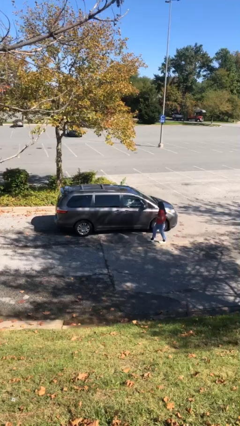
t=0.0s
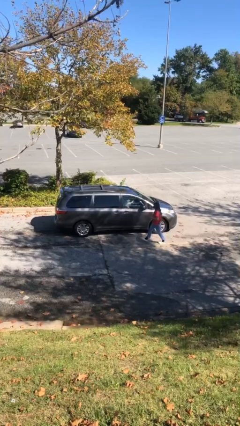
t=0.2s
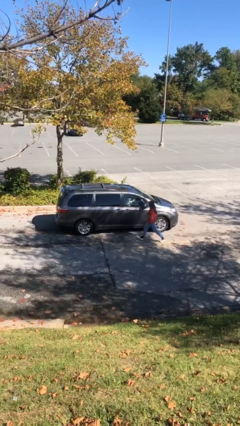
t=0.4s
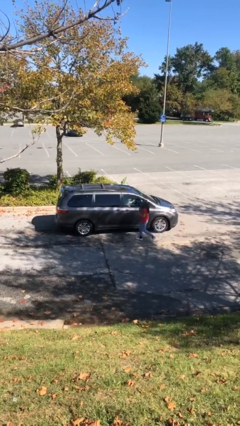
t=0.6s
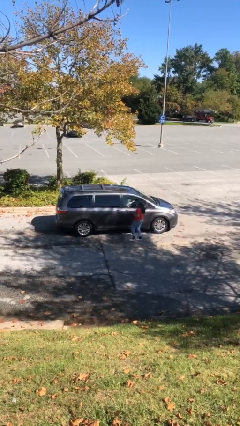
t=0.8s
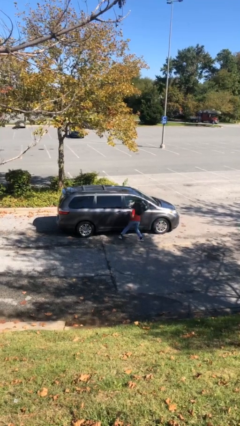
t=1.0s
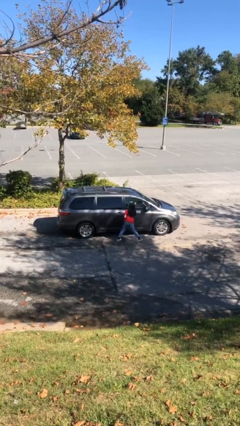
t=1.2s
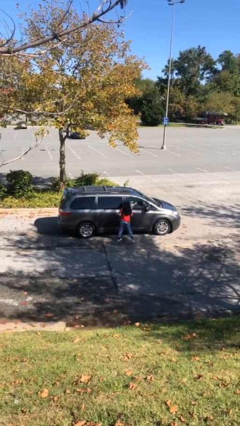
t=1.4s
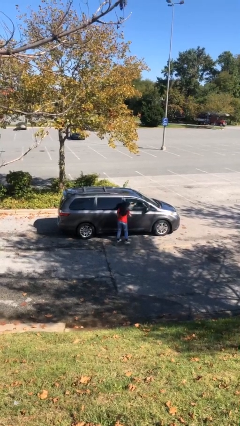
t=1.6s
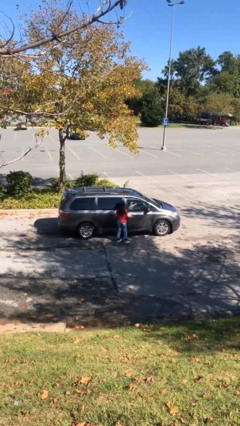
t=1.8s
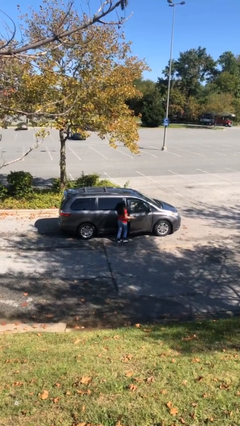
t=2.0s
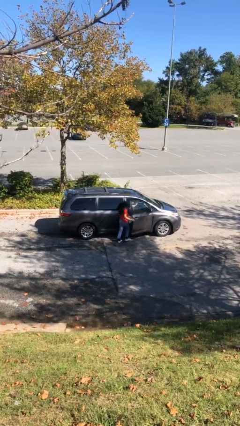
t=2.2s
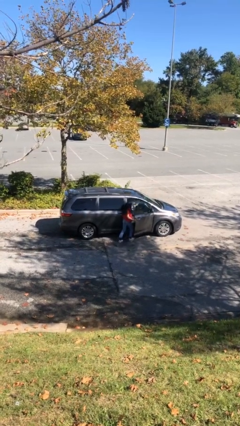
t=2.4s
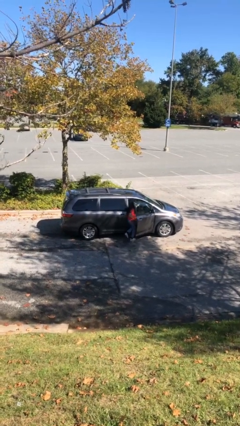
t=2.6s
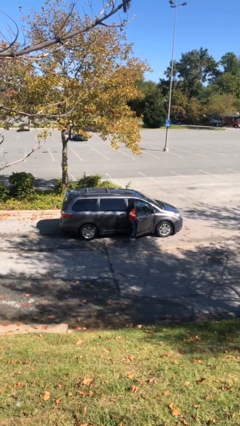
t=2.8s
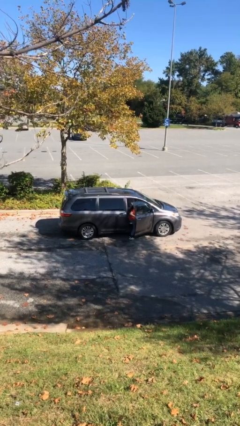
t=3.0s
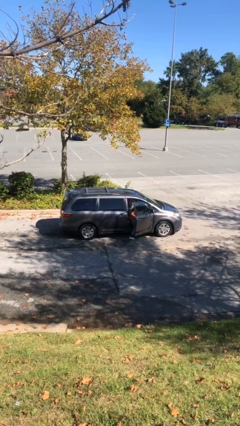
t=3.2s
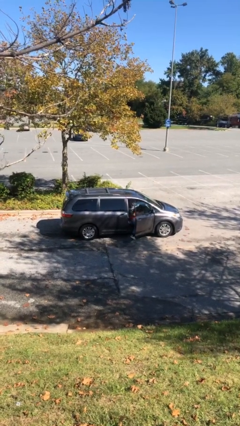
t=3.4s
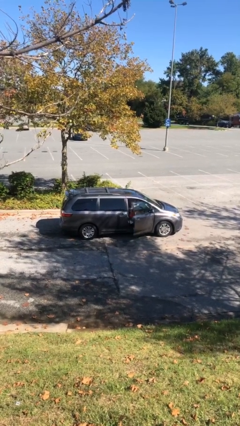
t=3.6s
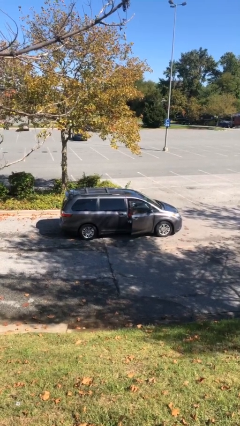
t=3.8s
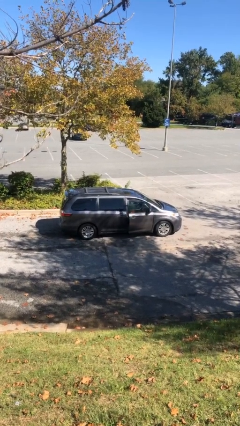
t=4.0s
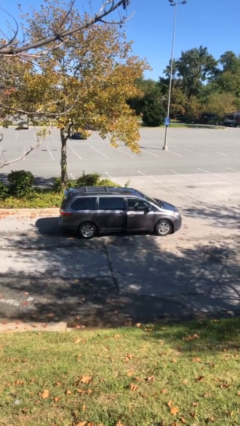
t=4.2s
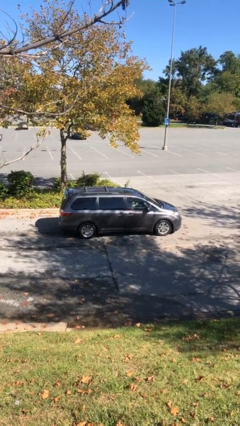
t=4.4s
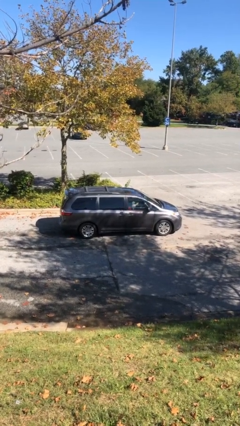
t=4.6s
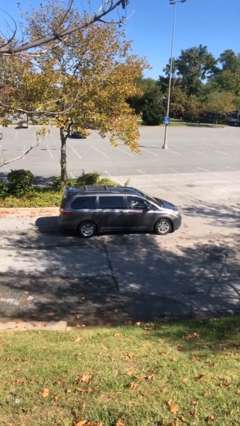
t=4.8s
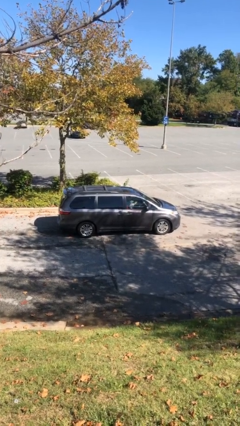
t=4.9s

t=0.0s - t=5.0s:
car picks up person

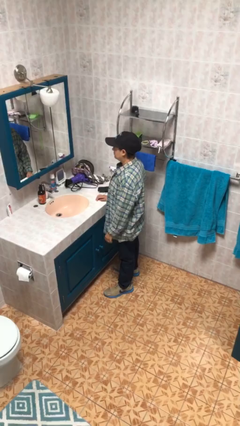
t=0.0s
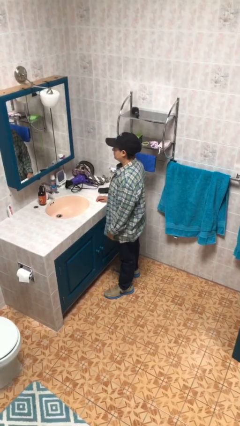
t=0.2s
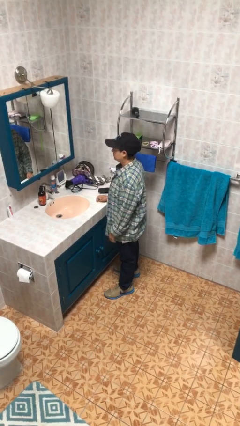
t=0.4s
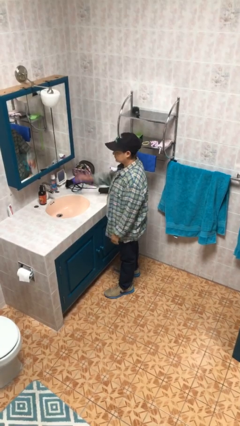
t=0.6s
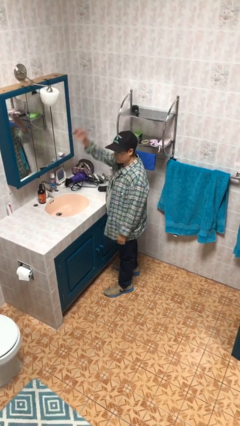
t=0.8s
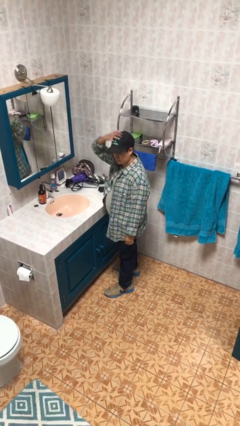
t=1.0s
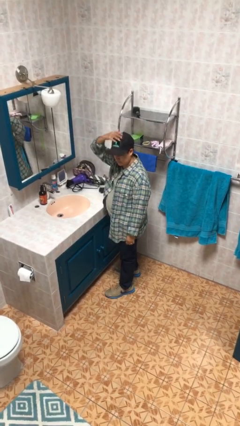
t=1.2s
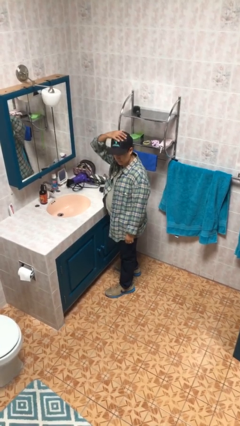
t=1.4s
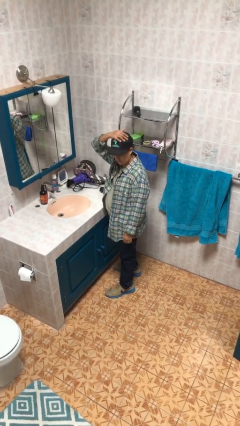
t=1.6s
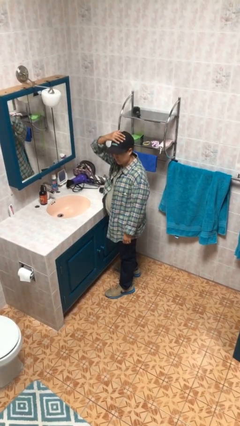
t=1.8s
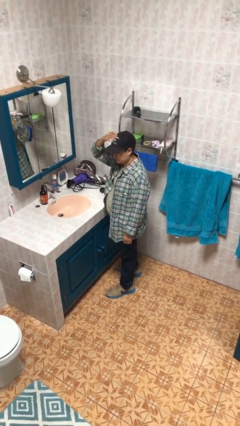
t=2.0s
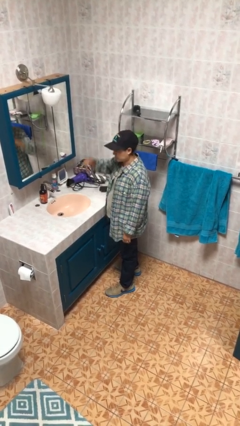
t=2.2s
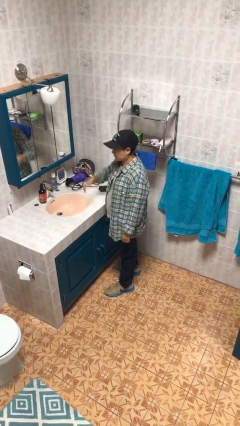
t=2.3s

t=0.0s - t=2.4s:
person pats head

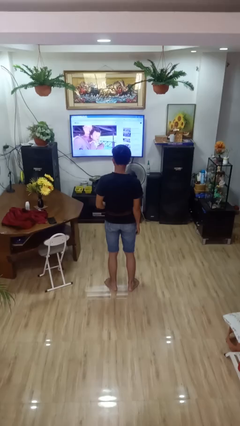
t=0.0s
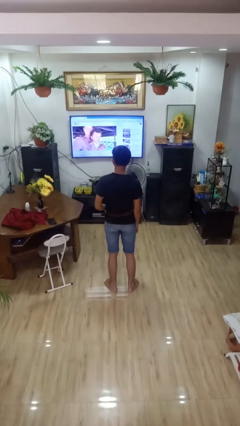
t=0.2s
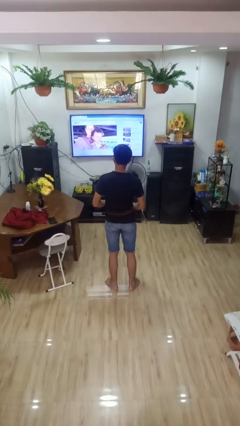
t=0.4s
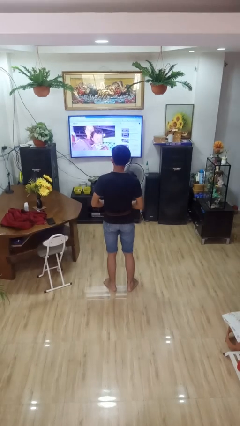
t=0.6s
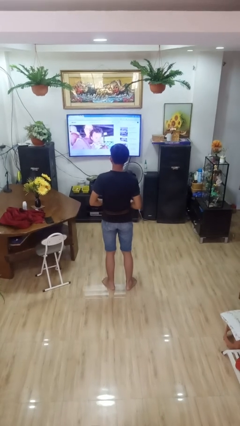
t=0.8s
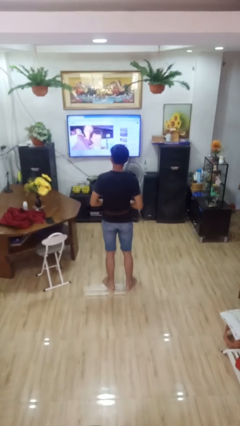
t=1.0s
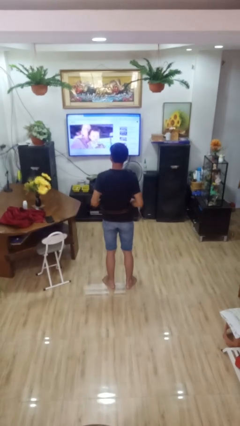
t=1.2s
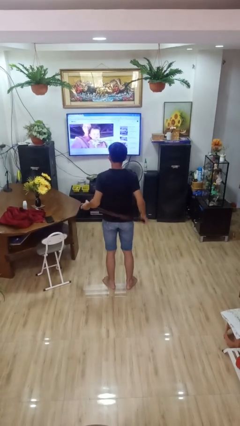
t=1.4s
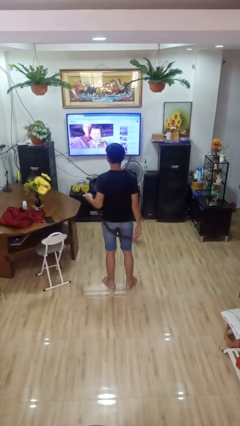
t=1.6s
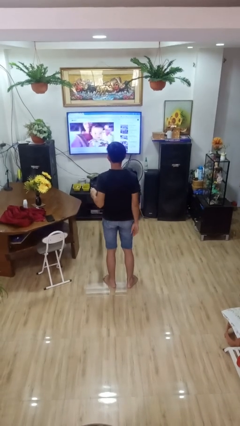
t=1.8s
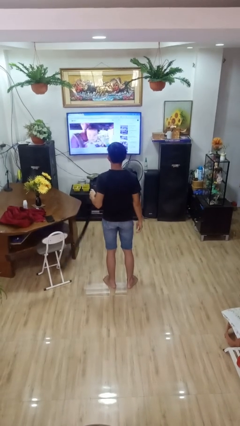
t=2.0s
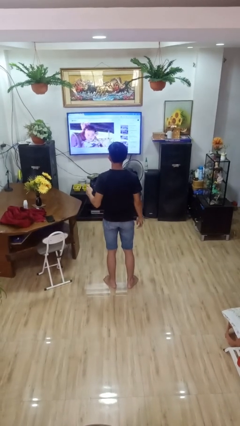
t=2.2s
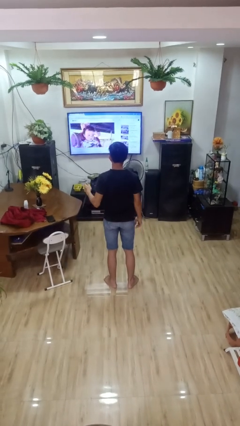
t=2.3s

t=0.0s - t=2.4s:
person takes off belt

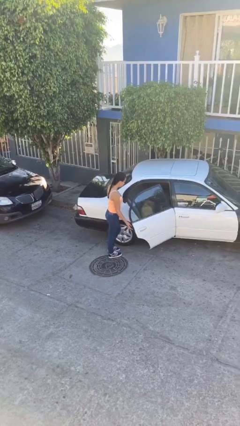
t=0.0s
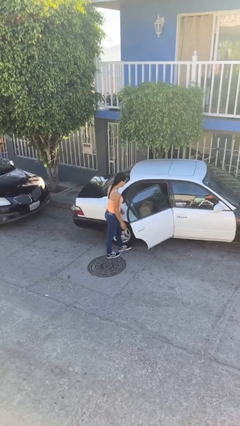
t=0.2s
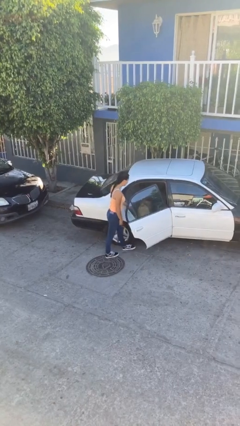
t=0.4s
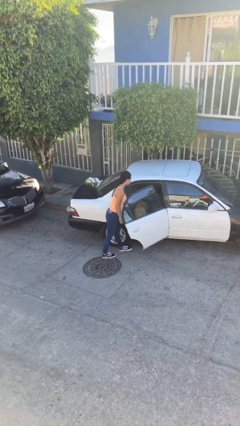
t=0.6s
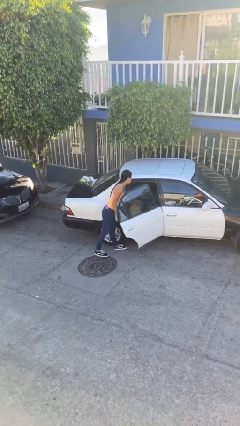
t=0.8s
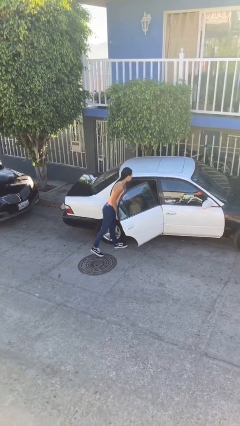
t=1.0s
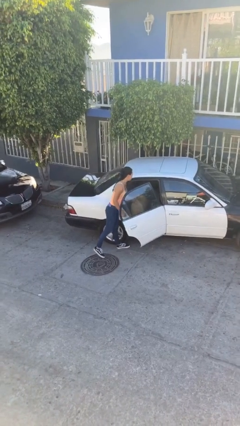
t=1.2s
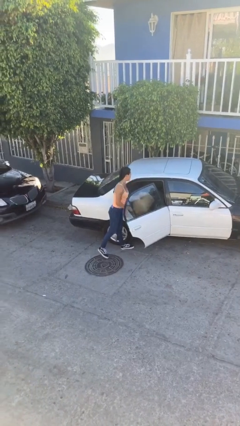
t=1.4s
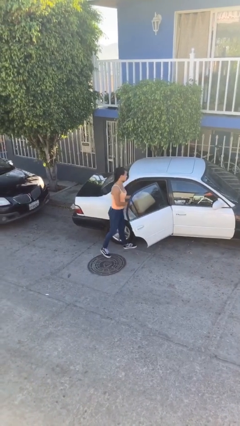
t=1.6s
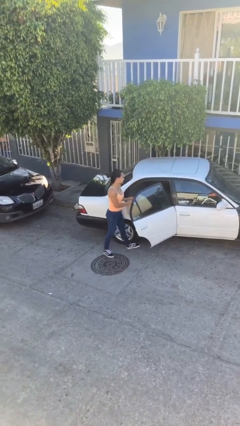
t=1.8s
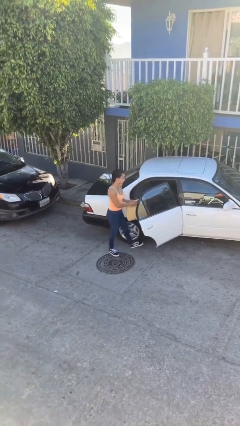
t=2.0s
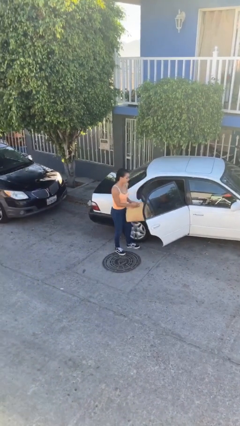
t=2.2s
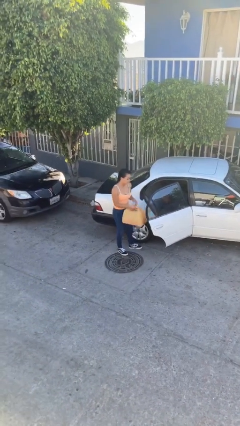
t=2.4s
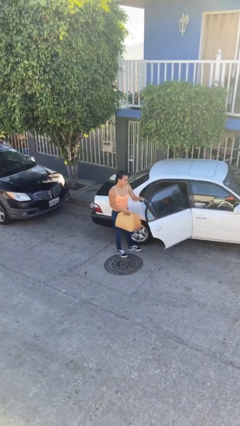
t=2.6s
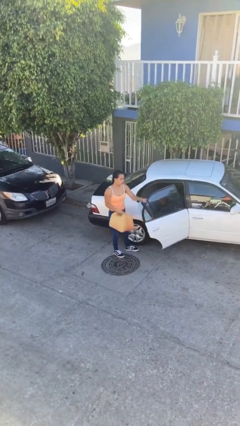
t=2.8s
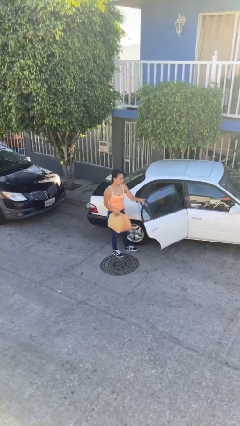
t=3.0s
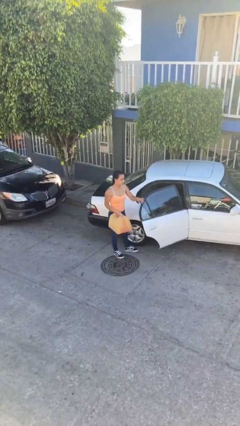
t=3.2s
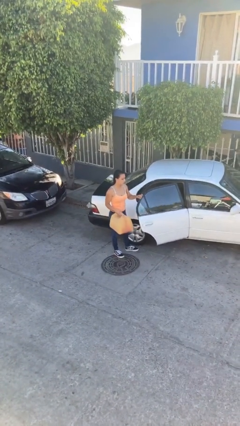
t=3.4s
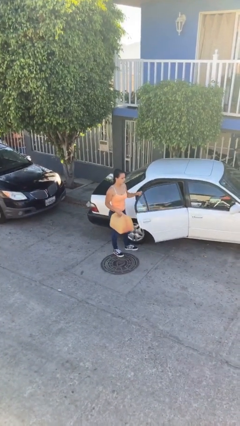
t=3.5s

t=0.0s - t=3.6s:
person unloads car

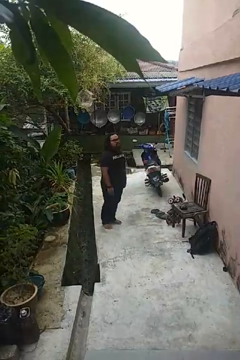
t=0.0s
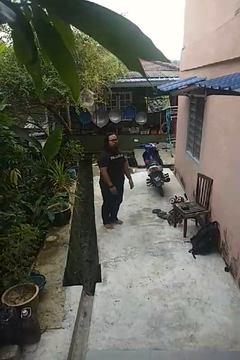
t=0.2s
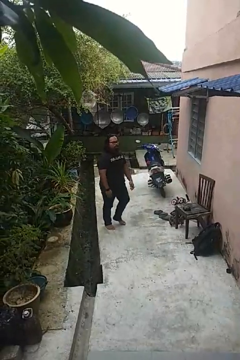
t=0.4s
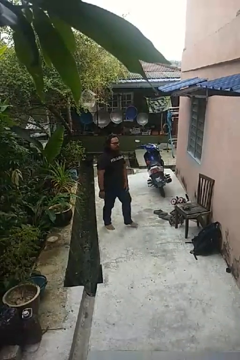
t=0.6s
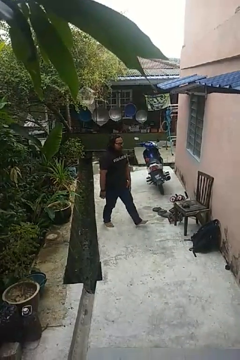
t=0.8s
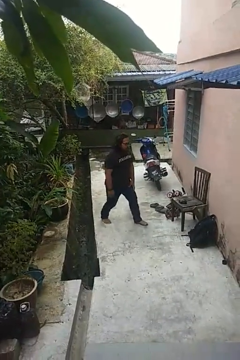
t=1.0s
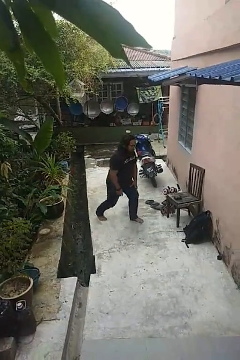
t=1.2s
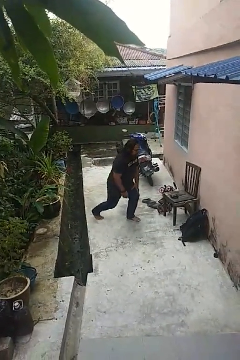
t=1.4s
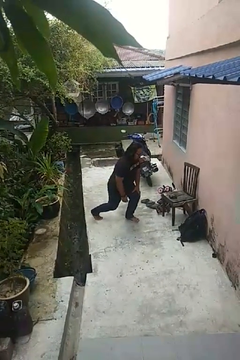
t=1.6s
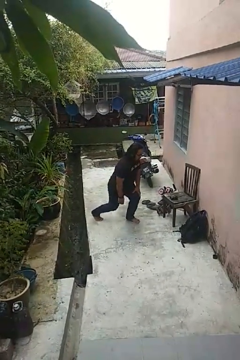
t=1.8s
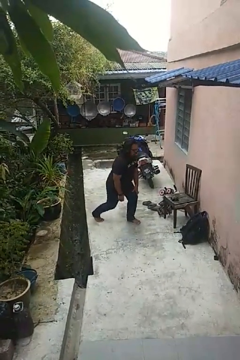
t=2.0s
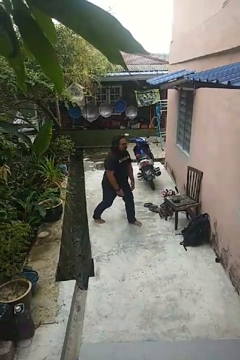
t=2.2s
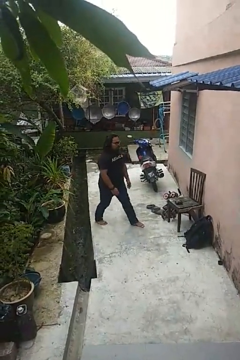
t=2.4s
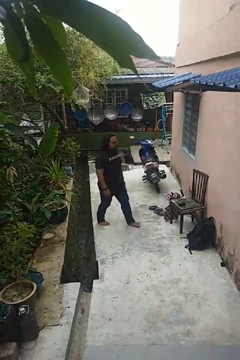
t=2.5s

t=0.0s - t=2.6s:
person exercises with lunges

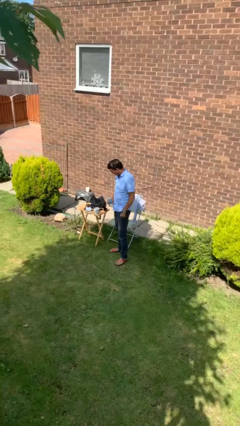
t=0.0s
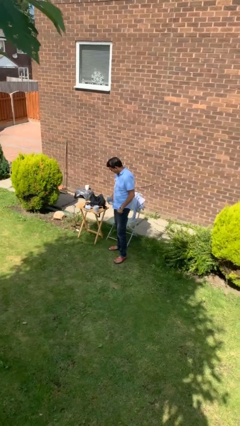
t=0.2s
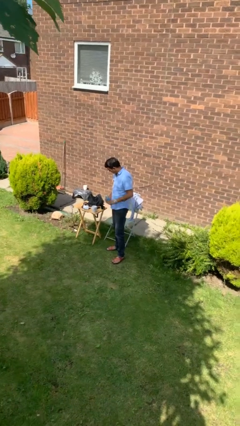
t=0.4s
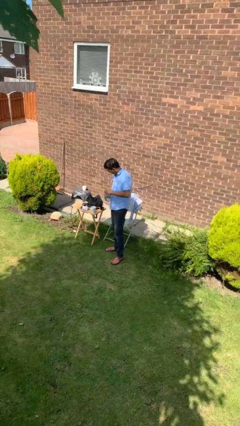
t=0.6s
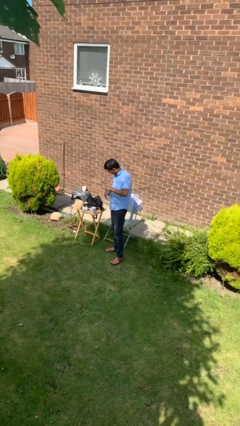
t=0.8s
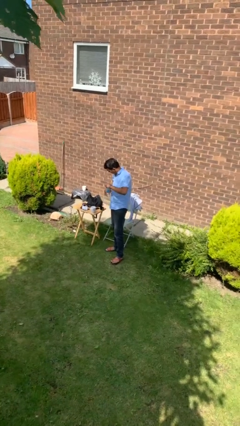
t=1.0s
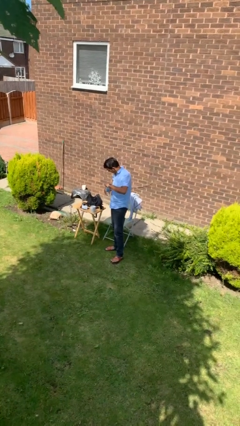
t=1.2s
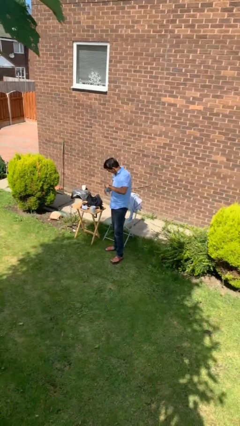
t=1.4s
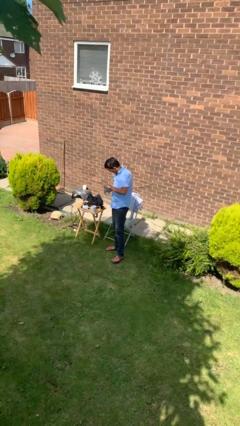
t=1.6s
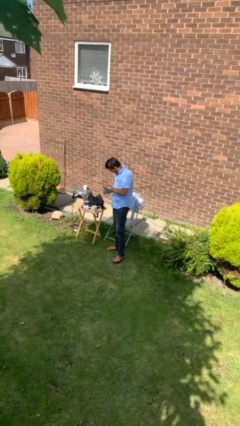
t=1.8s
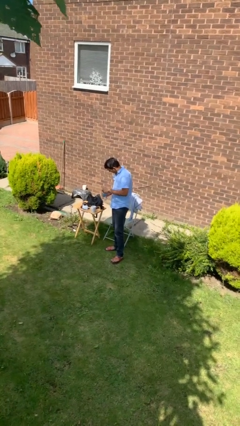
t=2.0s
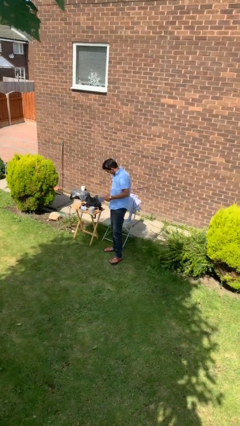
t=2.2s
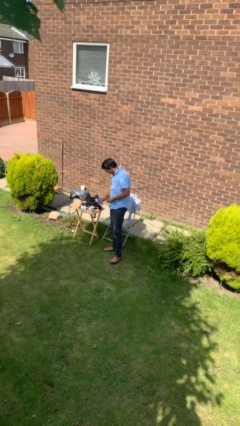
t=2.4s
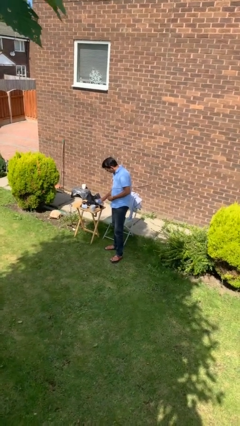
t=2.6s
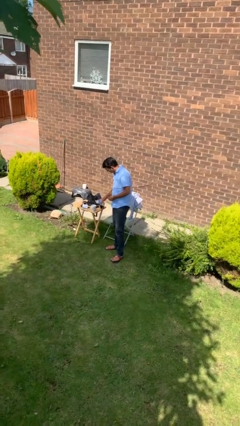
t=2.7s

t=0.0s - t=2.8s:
person unscrews lid from bottle
